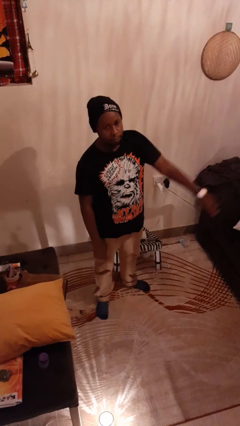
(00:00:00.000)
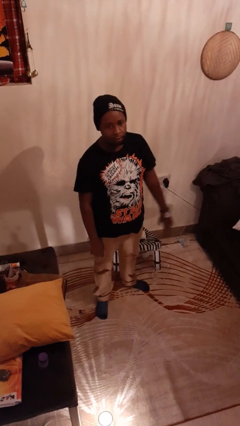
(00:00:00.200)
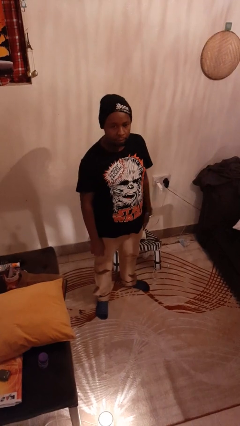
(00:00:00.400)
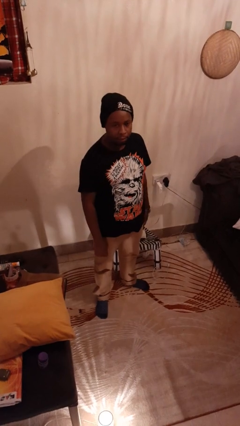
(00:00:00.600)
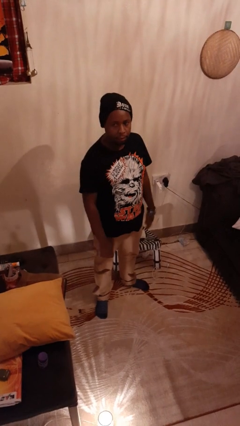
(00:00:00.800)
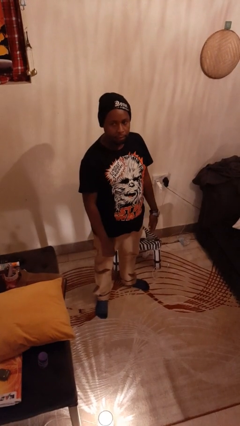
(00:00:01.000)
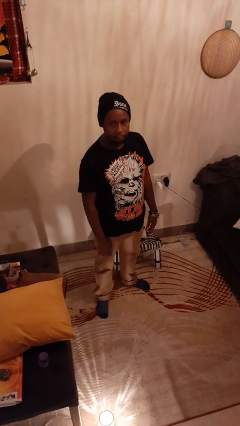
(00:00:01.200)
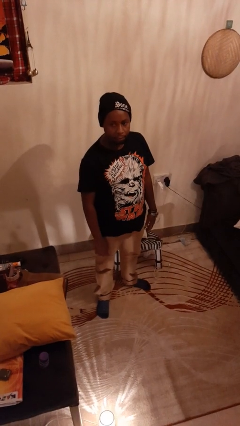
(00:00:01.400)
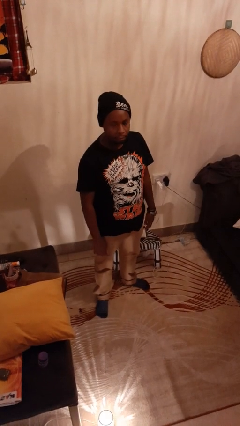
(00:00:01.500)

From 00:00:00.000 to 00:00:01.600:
person gestures lower hand

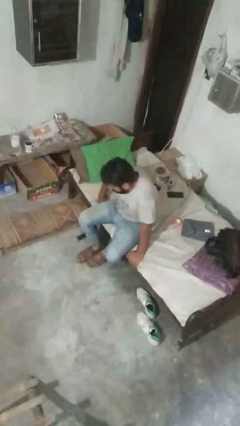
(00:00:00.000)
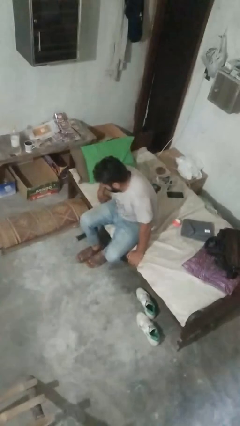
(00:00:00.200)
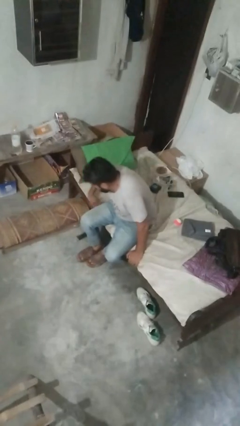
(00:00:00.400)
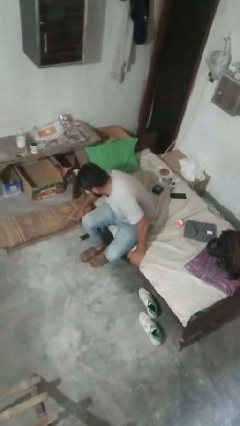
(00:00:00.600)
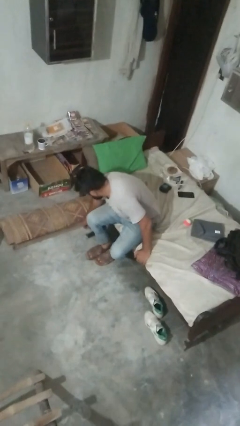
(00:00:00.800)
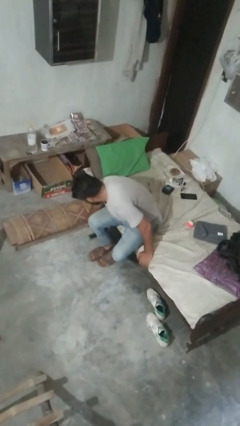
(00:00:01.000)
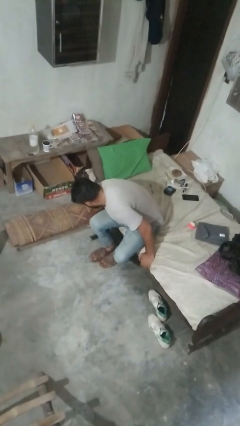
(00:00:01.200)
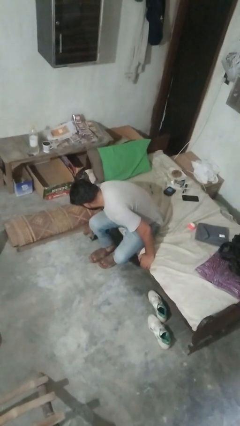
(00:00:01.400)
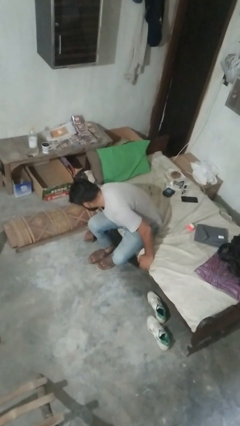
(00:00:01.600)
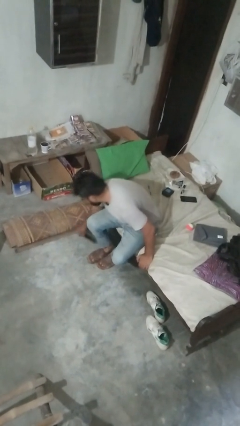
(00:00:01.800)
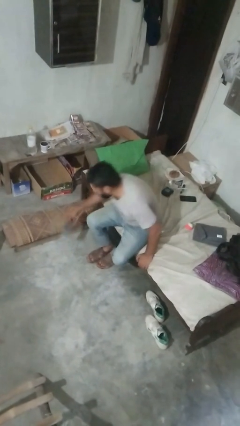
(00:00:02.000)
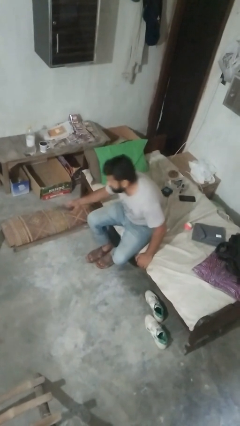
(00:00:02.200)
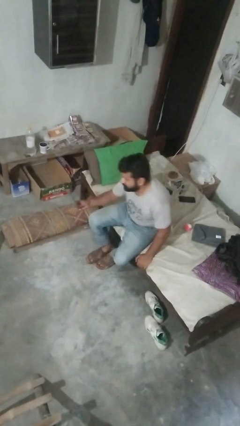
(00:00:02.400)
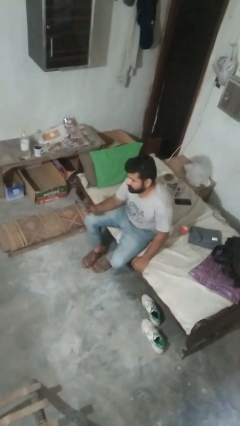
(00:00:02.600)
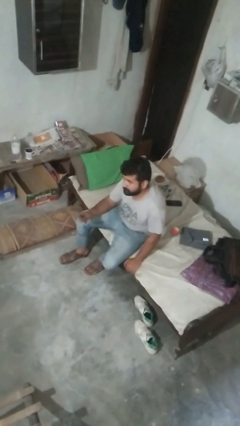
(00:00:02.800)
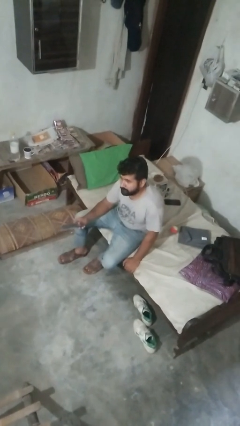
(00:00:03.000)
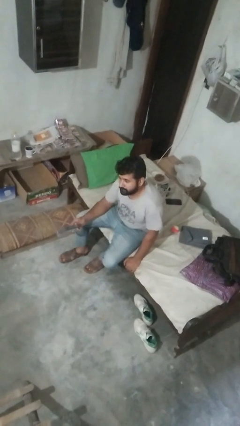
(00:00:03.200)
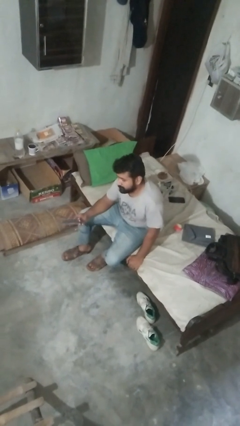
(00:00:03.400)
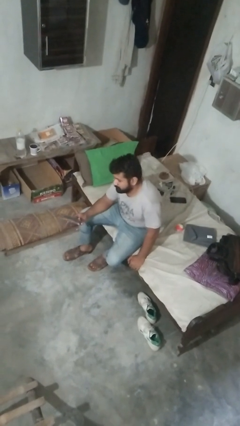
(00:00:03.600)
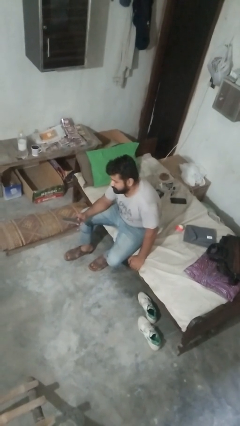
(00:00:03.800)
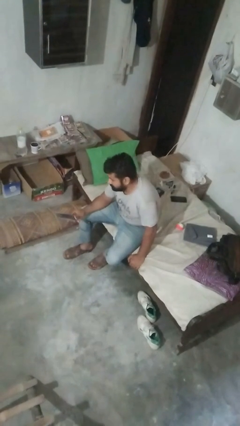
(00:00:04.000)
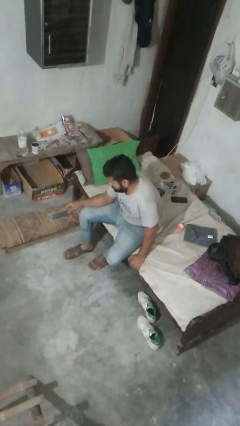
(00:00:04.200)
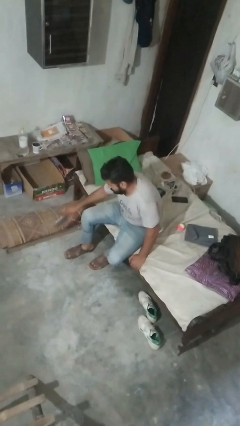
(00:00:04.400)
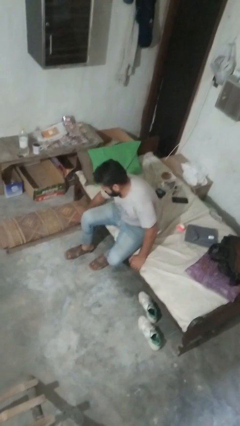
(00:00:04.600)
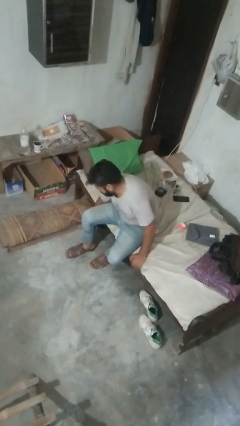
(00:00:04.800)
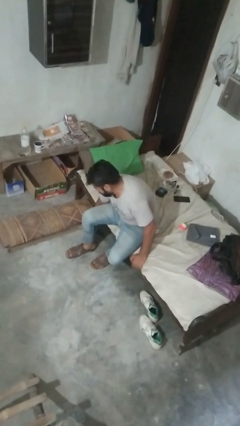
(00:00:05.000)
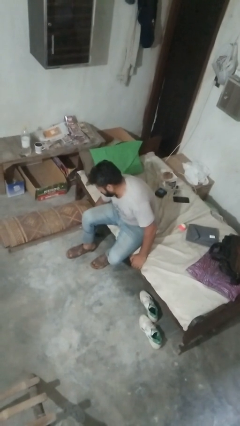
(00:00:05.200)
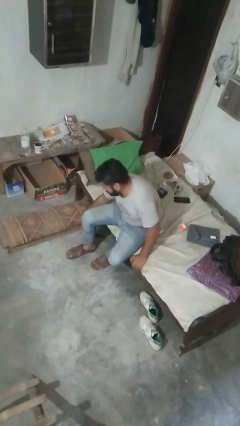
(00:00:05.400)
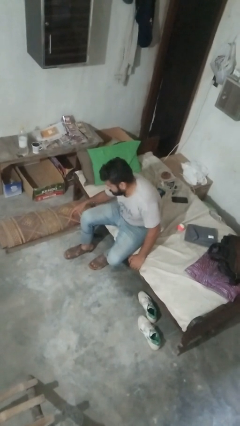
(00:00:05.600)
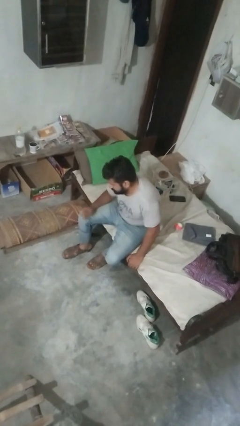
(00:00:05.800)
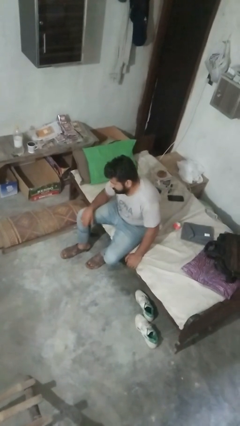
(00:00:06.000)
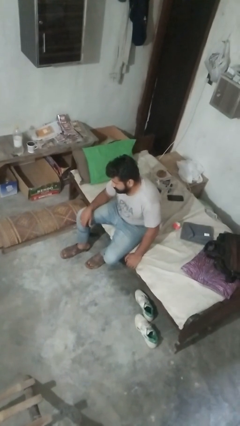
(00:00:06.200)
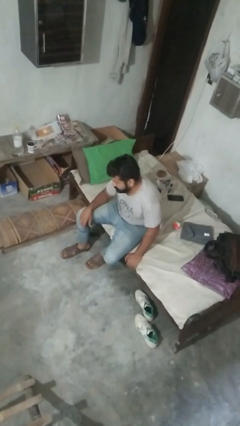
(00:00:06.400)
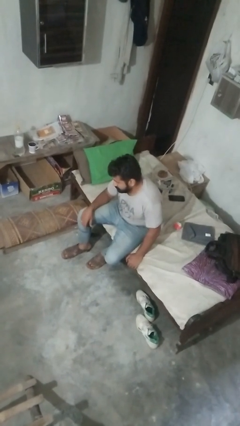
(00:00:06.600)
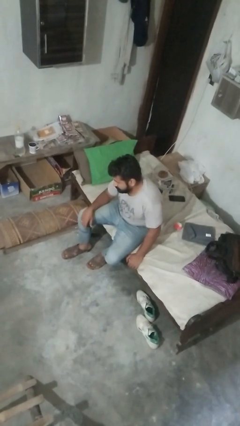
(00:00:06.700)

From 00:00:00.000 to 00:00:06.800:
person searches under couch

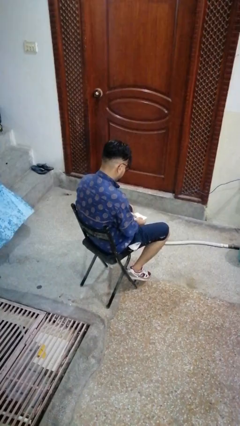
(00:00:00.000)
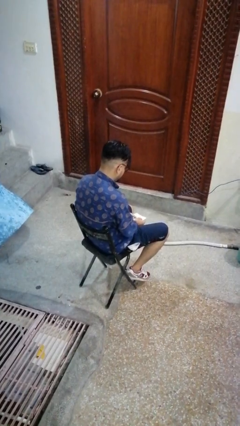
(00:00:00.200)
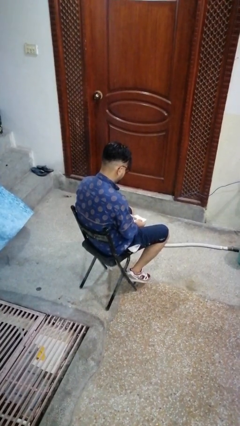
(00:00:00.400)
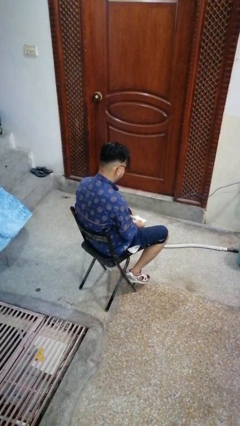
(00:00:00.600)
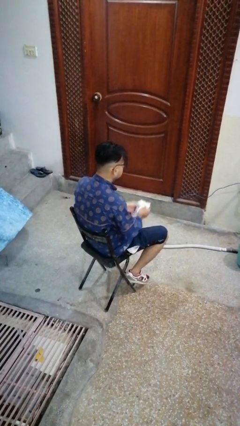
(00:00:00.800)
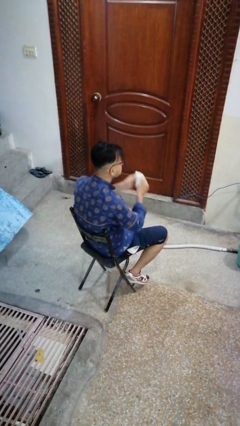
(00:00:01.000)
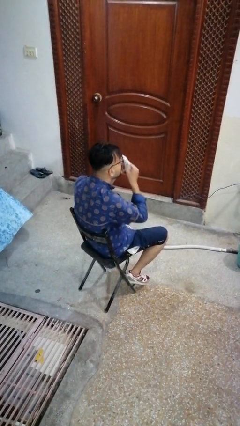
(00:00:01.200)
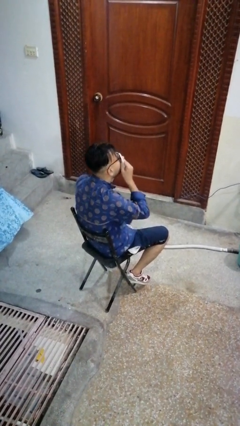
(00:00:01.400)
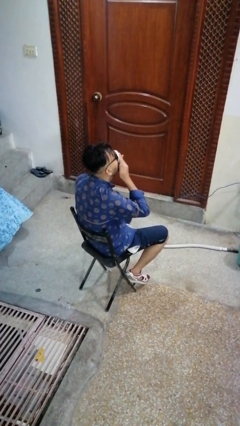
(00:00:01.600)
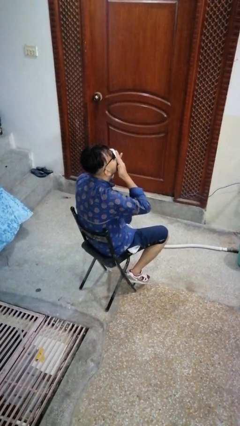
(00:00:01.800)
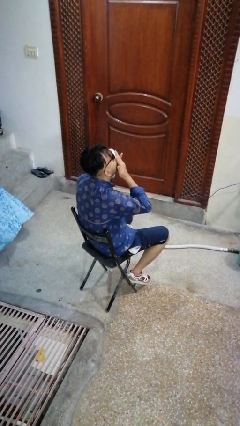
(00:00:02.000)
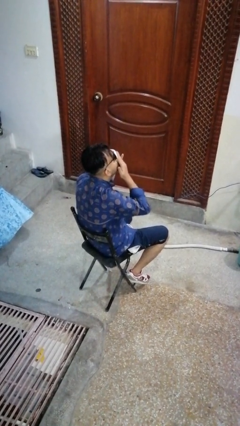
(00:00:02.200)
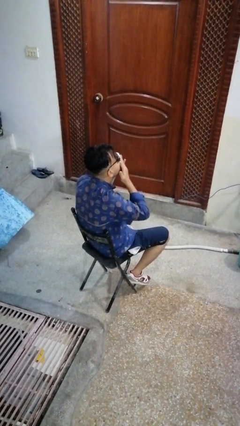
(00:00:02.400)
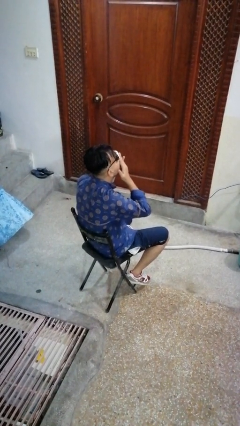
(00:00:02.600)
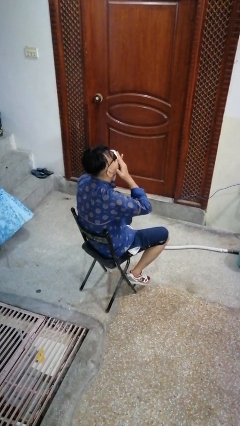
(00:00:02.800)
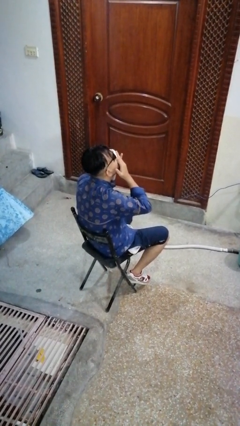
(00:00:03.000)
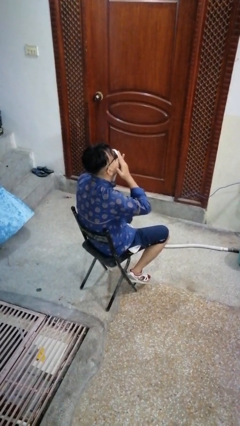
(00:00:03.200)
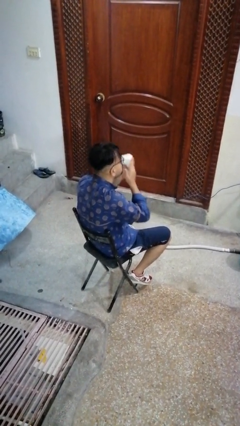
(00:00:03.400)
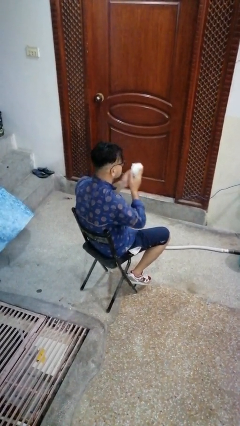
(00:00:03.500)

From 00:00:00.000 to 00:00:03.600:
person blows nose

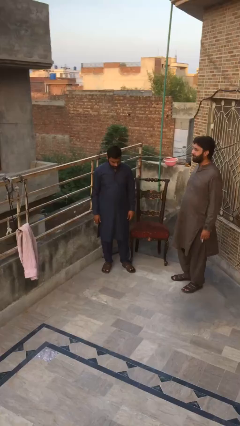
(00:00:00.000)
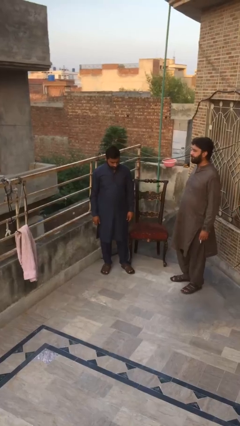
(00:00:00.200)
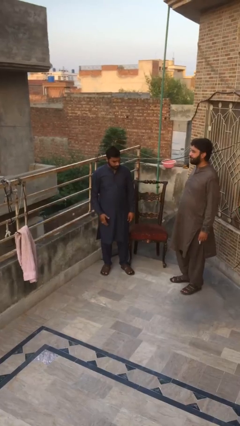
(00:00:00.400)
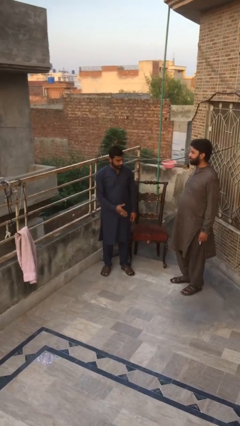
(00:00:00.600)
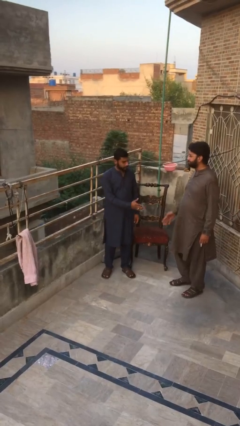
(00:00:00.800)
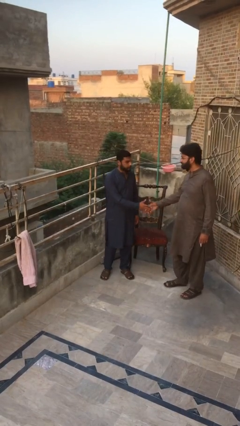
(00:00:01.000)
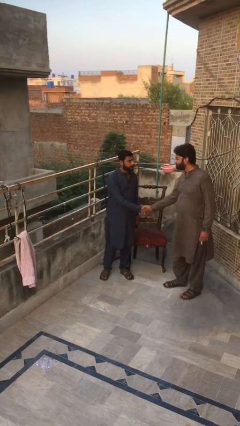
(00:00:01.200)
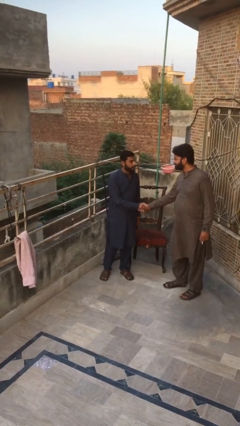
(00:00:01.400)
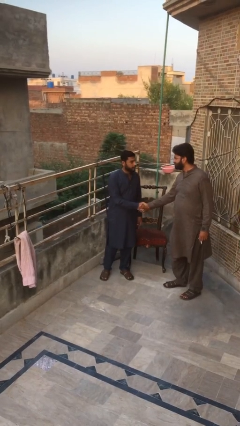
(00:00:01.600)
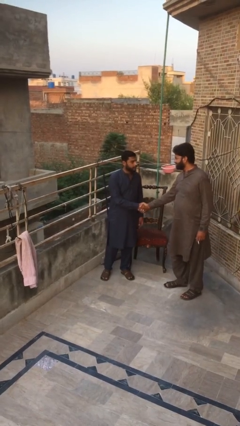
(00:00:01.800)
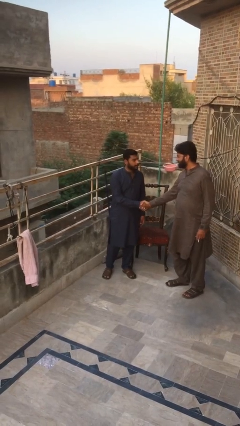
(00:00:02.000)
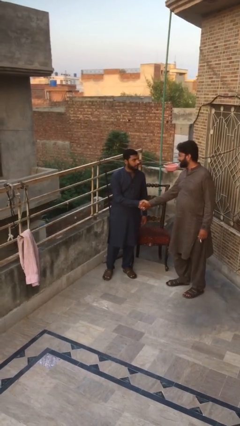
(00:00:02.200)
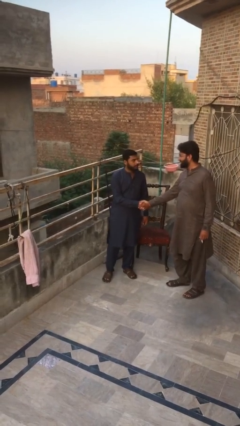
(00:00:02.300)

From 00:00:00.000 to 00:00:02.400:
person shakes hand

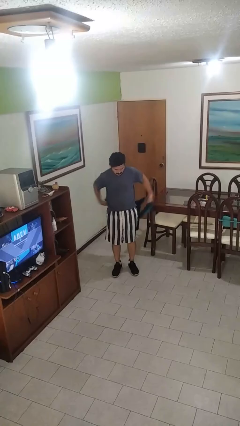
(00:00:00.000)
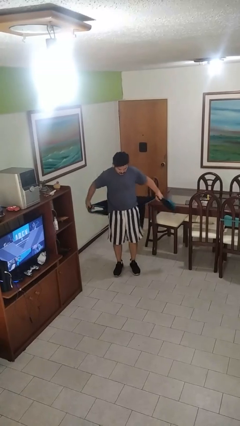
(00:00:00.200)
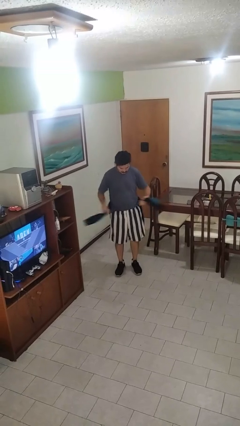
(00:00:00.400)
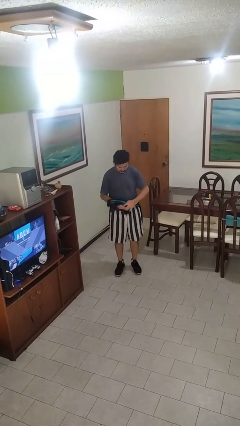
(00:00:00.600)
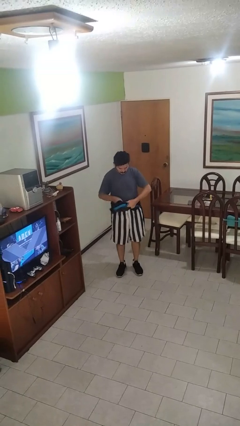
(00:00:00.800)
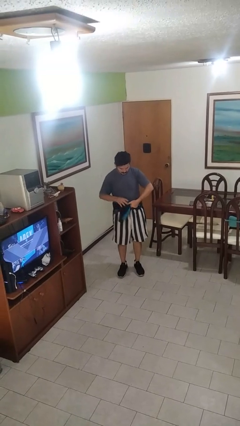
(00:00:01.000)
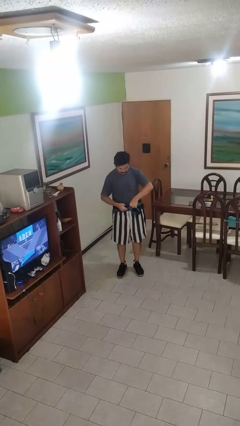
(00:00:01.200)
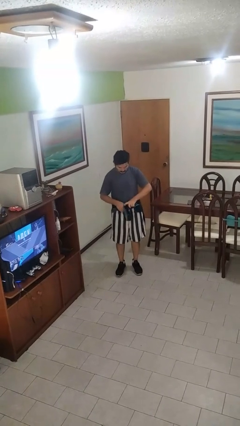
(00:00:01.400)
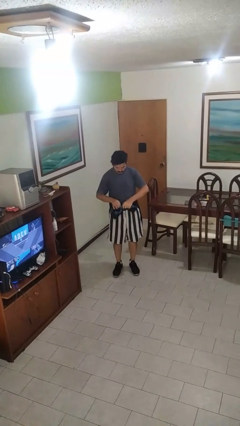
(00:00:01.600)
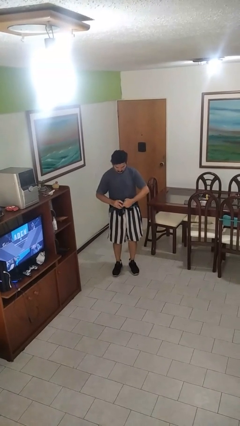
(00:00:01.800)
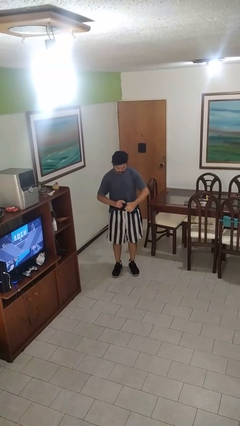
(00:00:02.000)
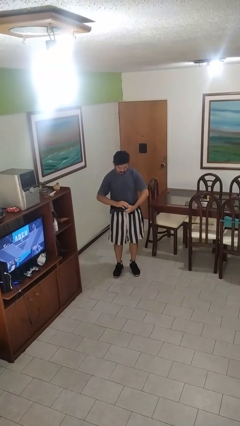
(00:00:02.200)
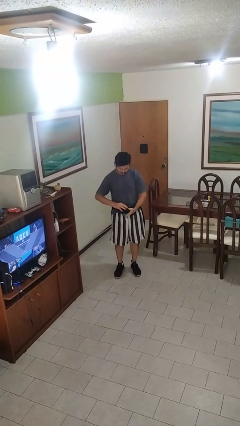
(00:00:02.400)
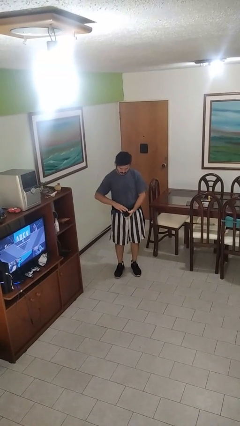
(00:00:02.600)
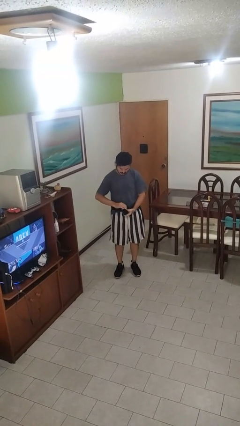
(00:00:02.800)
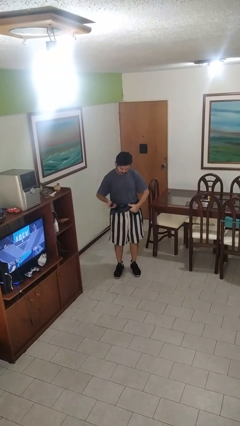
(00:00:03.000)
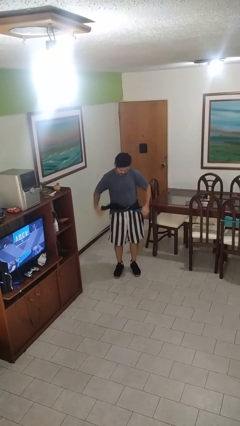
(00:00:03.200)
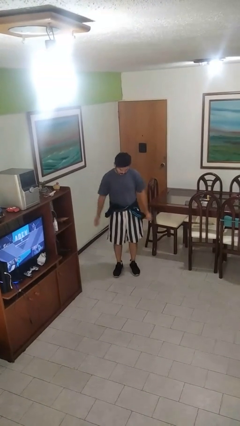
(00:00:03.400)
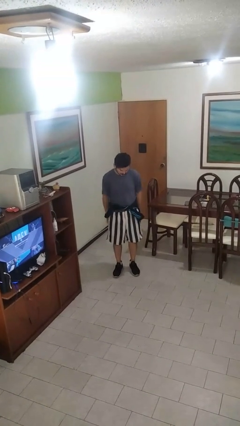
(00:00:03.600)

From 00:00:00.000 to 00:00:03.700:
person ties jacket around waist
